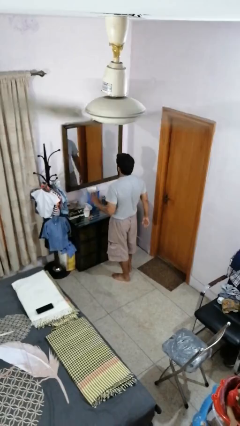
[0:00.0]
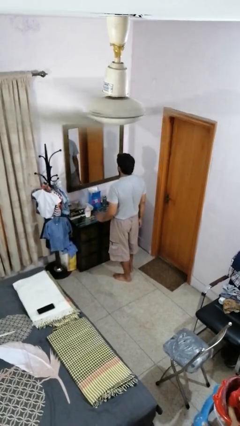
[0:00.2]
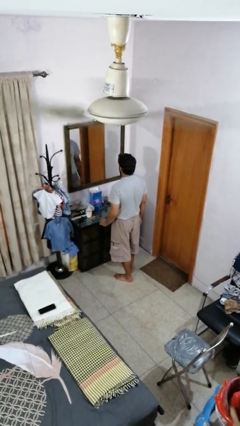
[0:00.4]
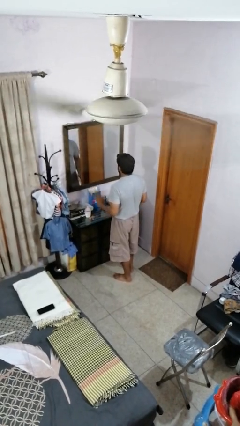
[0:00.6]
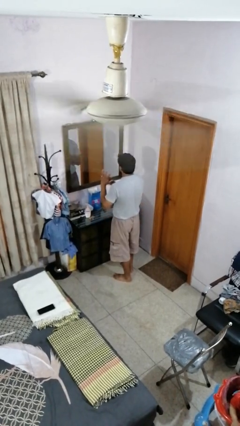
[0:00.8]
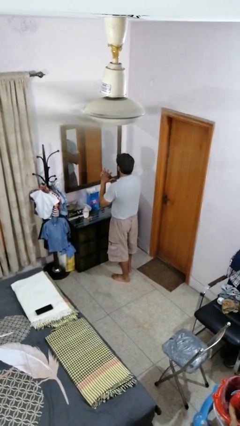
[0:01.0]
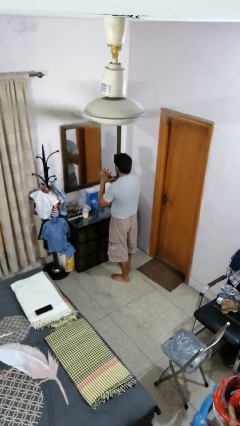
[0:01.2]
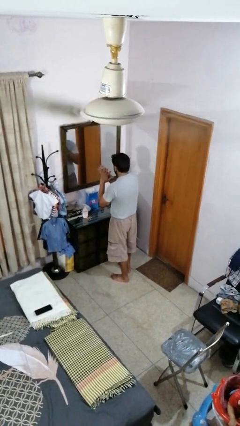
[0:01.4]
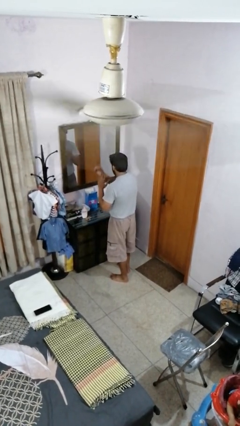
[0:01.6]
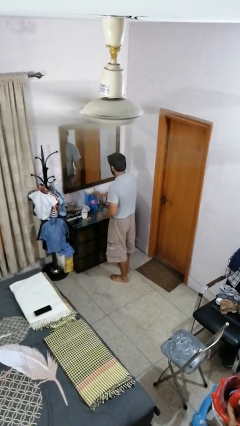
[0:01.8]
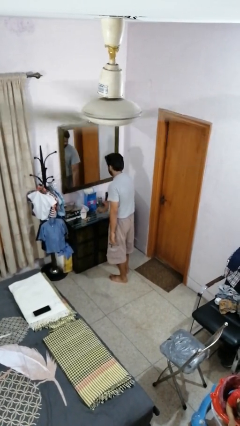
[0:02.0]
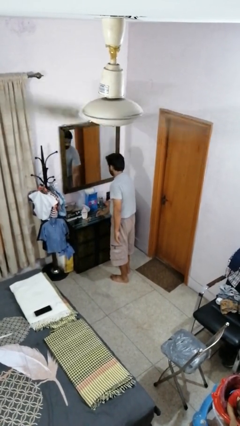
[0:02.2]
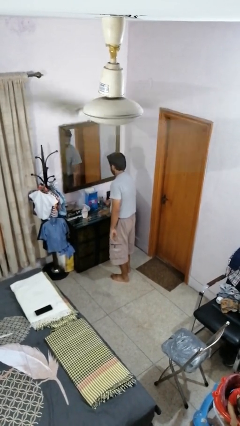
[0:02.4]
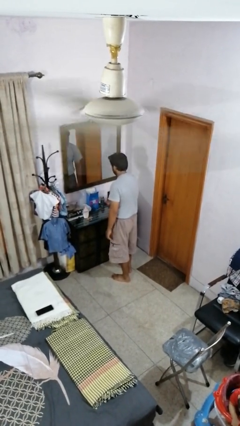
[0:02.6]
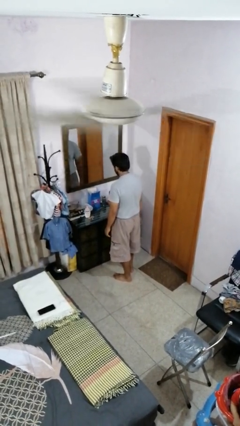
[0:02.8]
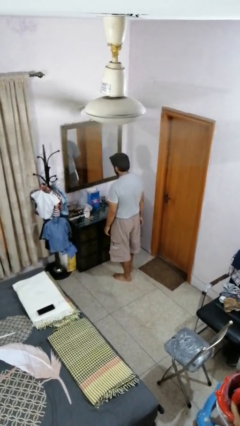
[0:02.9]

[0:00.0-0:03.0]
person takes off ring

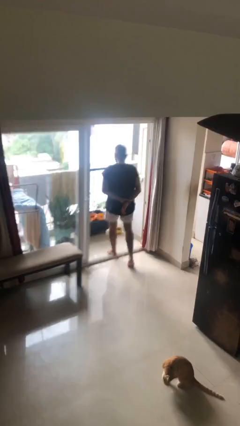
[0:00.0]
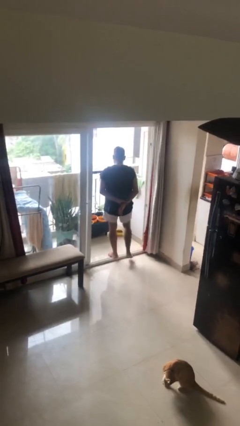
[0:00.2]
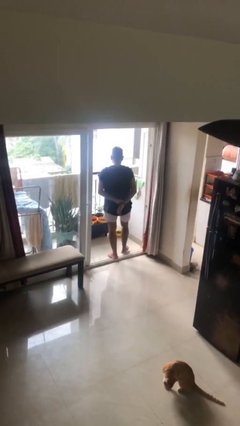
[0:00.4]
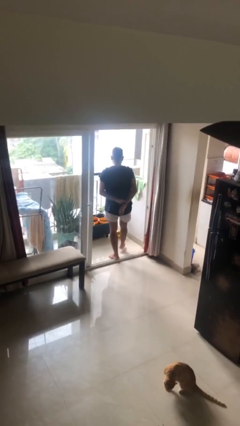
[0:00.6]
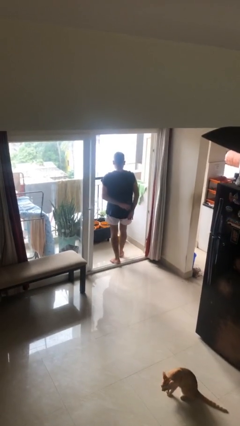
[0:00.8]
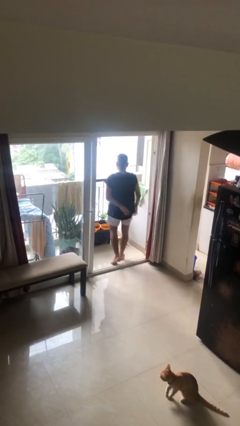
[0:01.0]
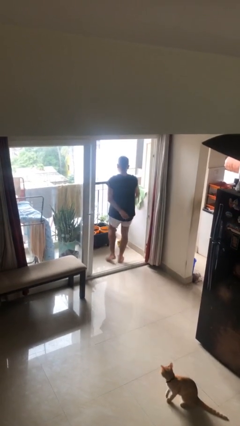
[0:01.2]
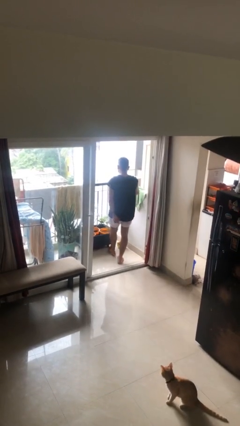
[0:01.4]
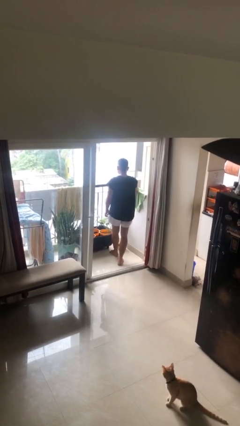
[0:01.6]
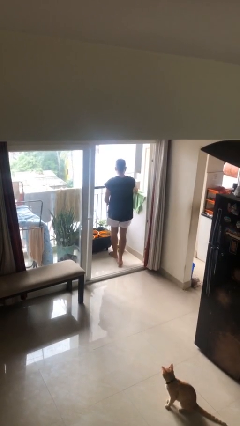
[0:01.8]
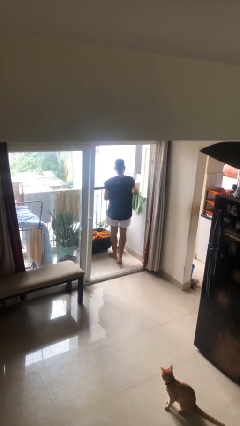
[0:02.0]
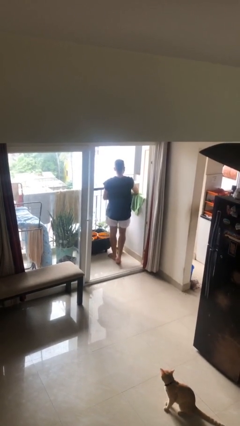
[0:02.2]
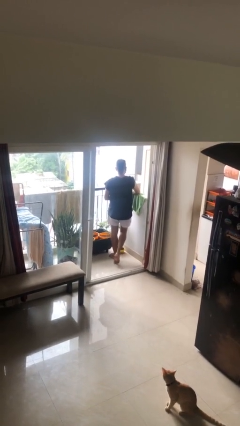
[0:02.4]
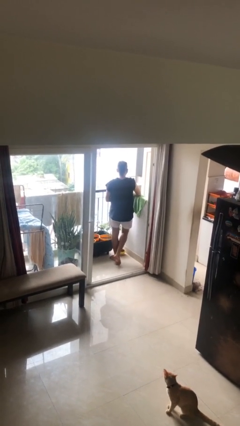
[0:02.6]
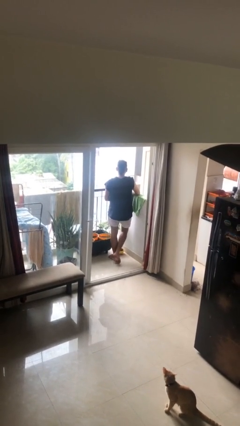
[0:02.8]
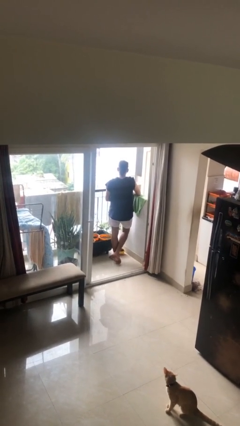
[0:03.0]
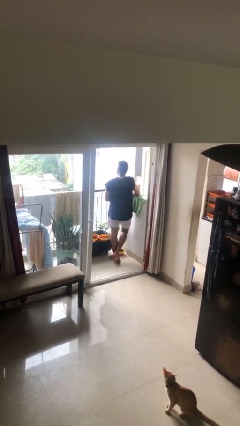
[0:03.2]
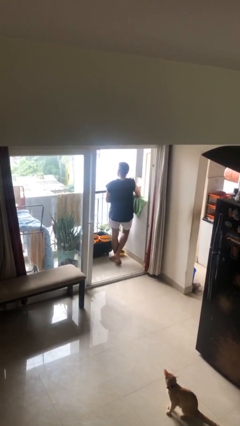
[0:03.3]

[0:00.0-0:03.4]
person exits scene through structure

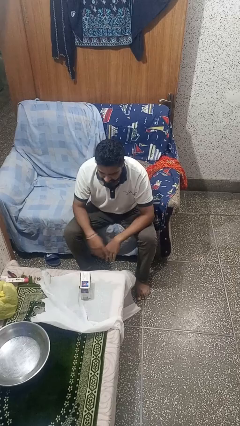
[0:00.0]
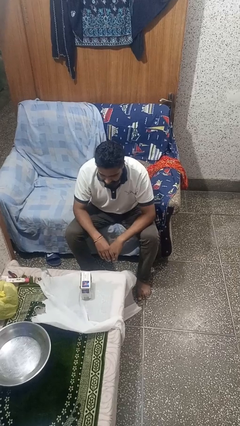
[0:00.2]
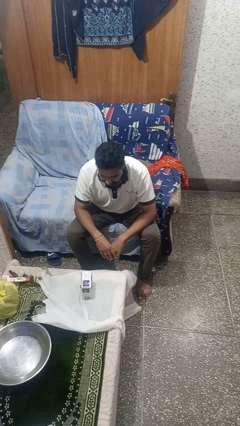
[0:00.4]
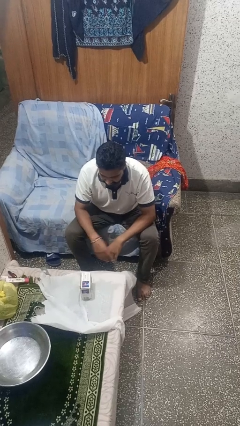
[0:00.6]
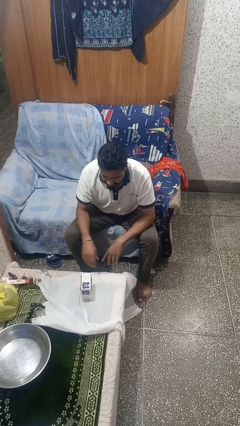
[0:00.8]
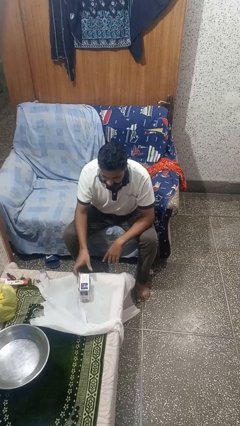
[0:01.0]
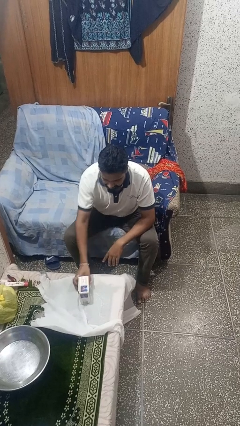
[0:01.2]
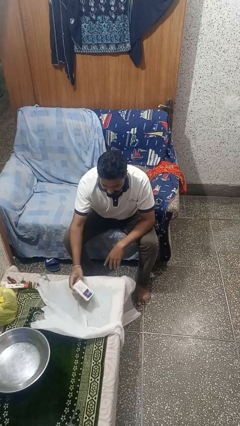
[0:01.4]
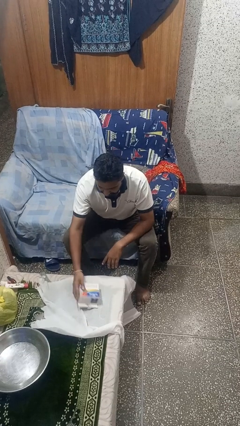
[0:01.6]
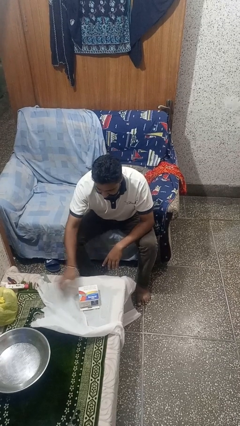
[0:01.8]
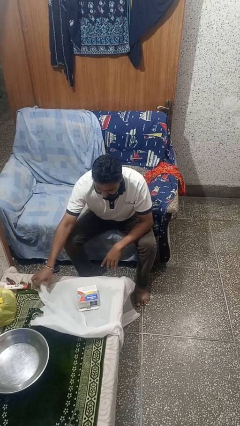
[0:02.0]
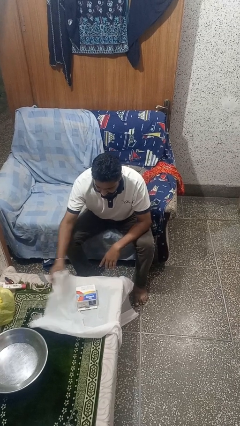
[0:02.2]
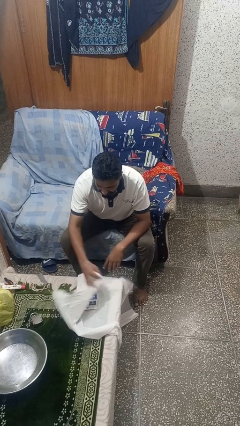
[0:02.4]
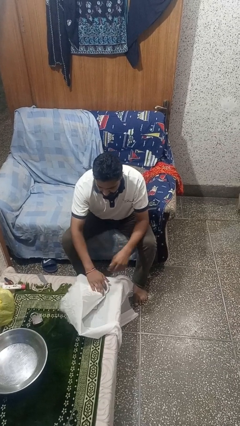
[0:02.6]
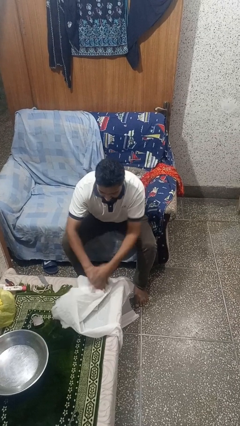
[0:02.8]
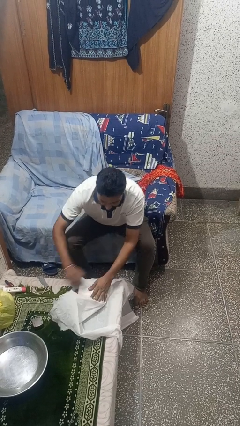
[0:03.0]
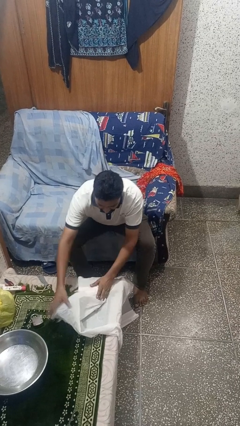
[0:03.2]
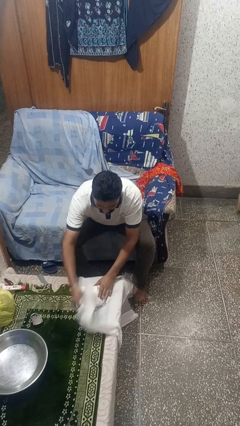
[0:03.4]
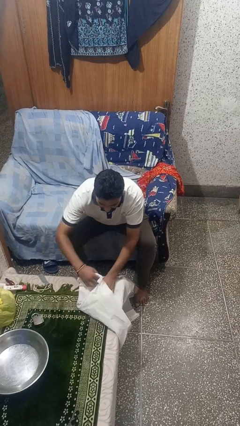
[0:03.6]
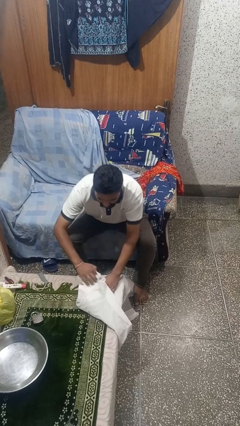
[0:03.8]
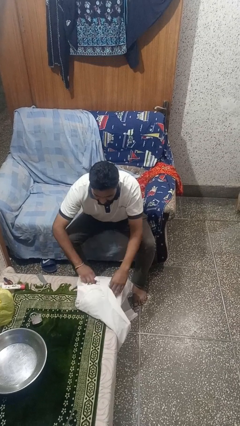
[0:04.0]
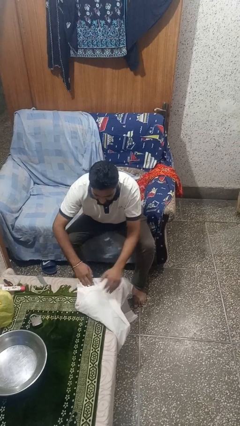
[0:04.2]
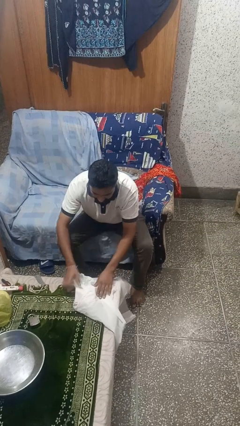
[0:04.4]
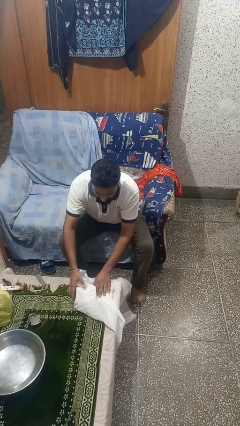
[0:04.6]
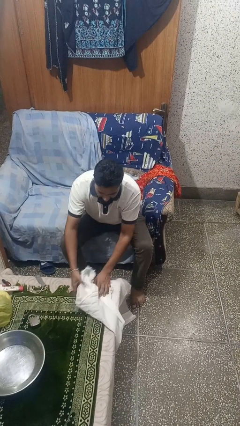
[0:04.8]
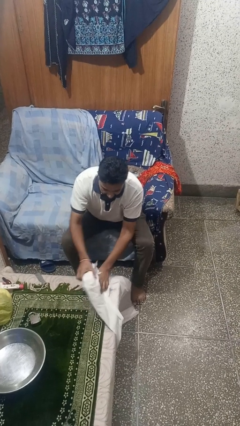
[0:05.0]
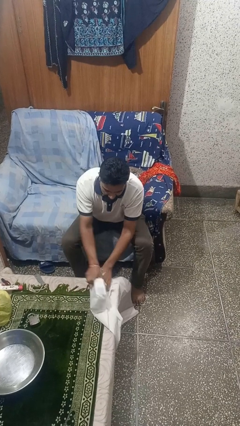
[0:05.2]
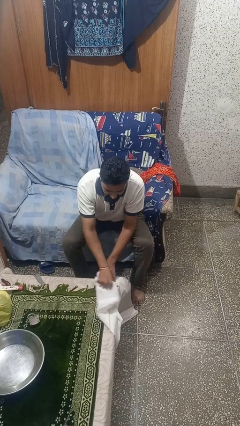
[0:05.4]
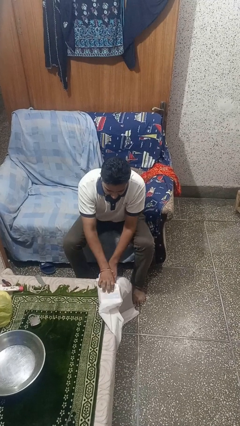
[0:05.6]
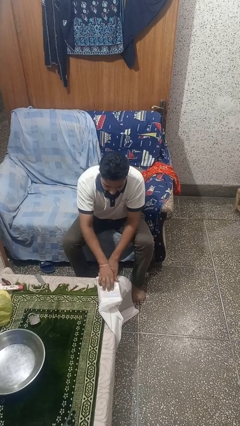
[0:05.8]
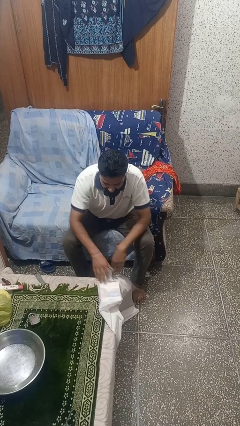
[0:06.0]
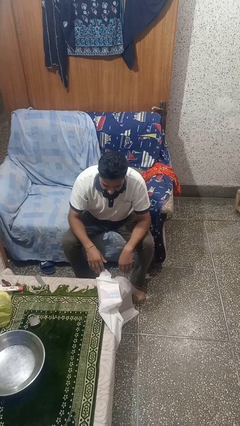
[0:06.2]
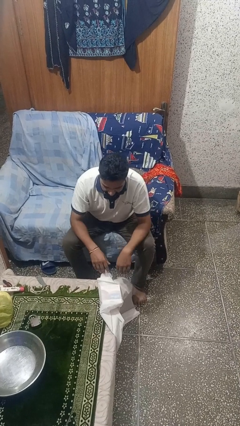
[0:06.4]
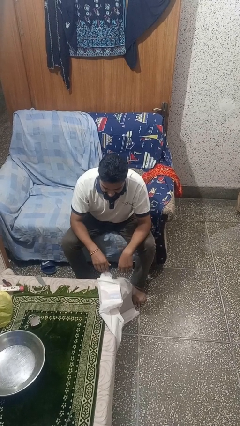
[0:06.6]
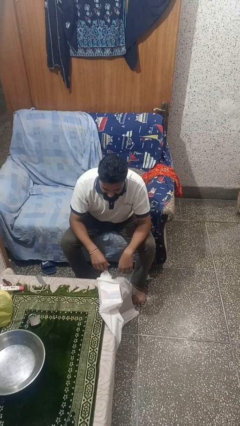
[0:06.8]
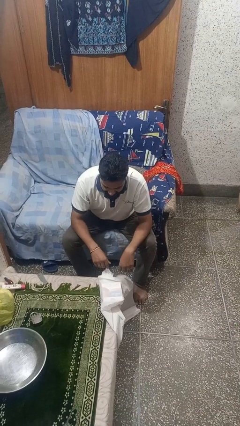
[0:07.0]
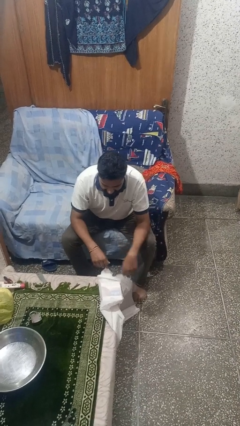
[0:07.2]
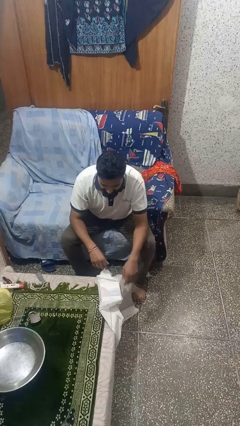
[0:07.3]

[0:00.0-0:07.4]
person wraps box

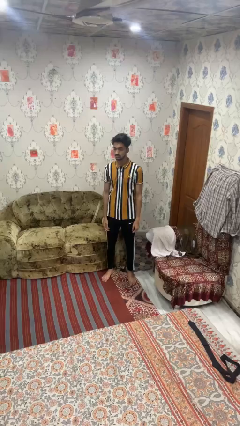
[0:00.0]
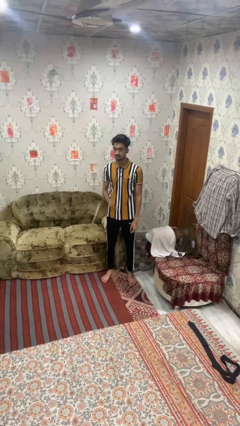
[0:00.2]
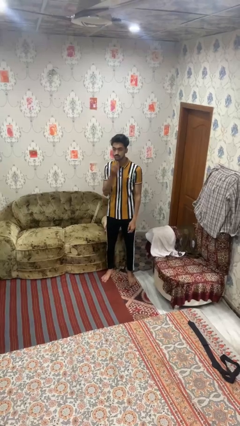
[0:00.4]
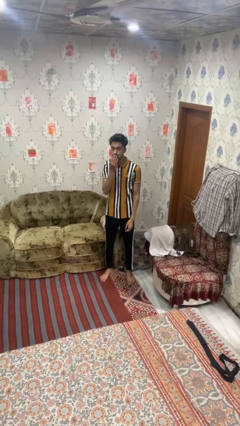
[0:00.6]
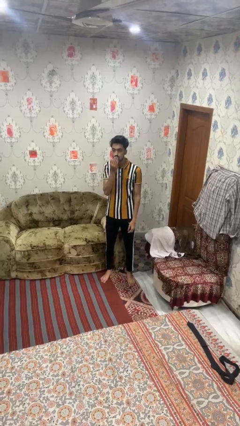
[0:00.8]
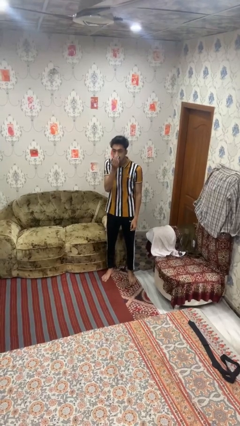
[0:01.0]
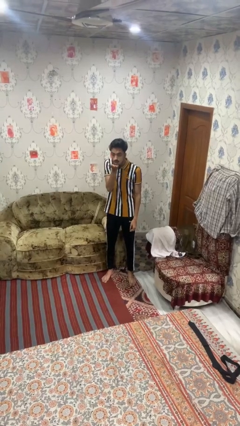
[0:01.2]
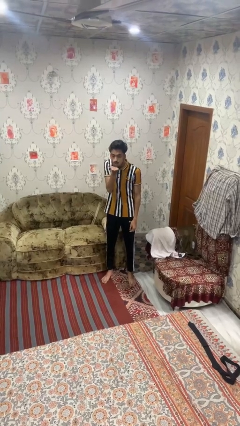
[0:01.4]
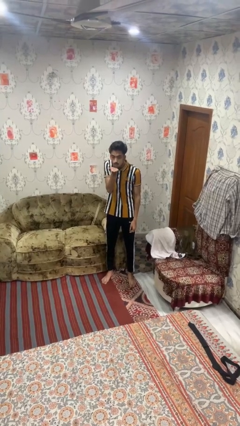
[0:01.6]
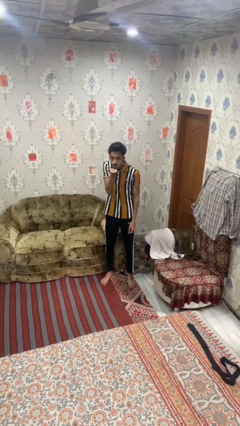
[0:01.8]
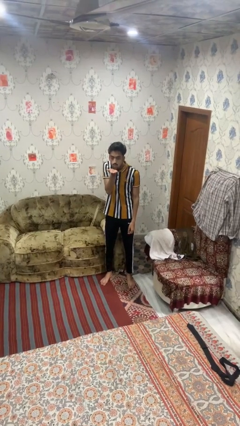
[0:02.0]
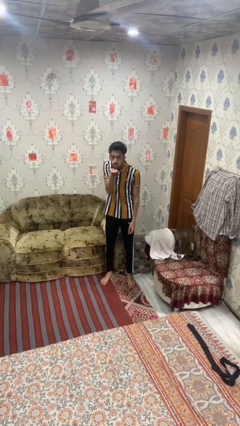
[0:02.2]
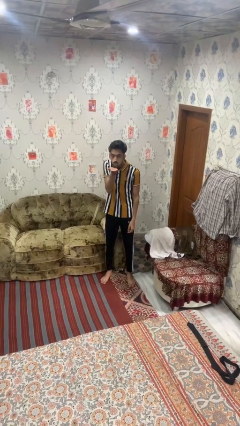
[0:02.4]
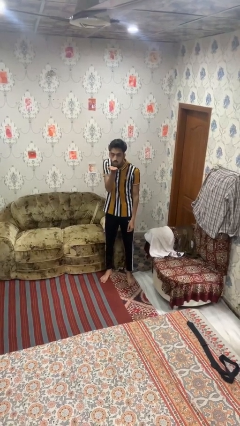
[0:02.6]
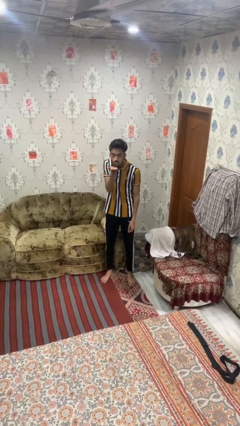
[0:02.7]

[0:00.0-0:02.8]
person gestures blow kiss

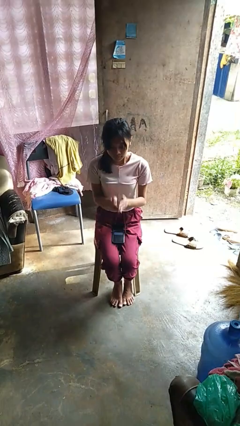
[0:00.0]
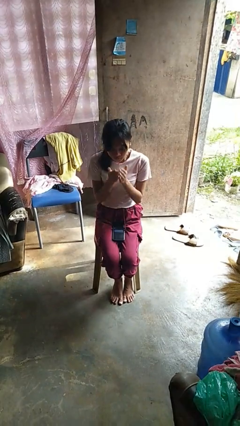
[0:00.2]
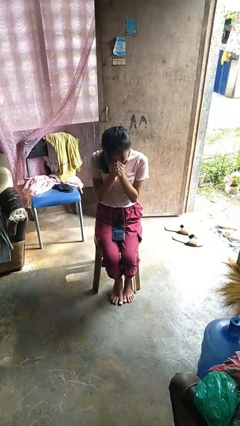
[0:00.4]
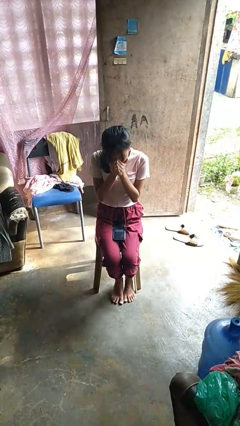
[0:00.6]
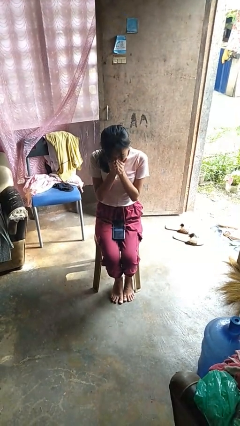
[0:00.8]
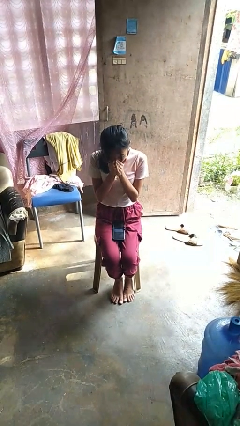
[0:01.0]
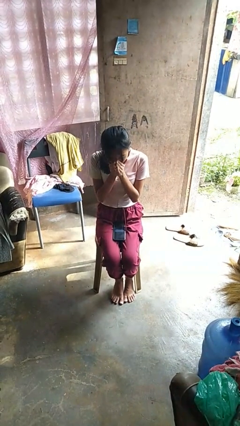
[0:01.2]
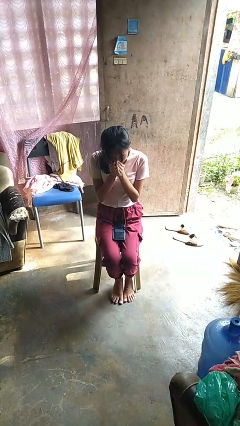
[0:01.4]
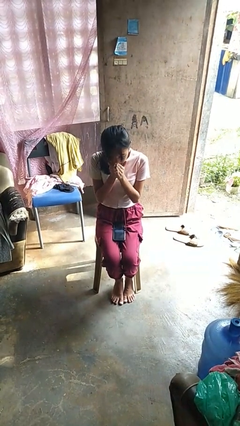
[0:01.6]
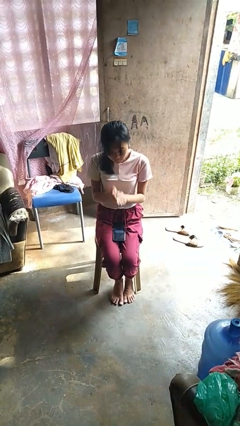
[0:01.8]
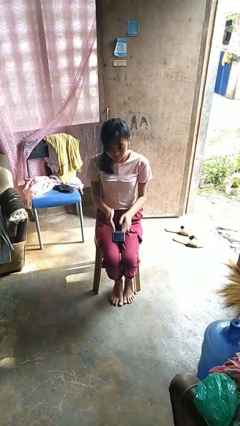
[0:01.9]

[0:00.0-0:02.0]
person sneezes into hand
